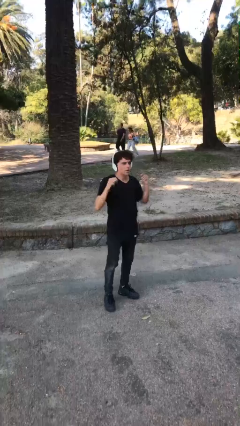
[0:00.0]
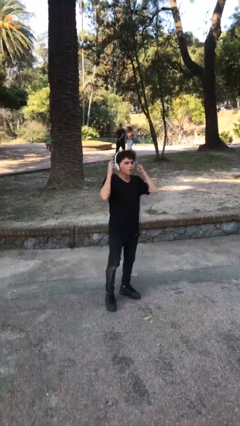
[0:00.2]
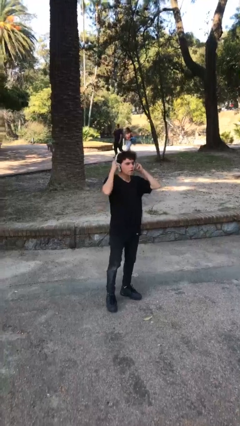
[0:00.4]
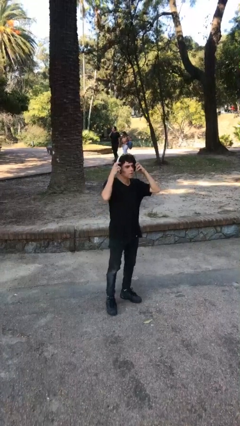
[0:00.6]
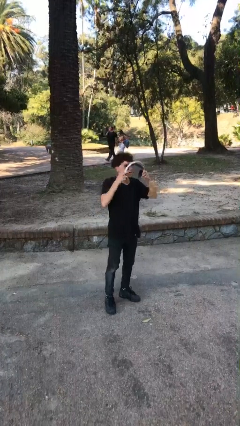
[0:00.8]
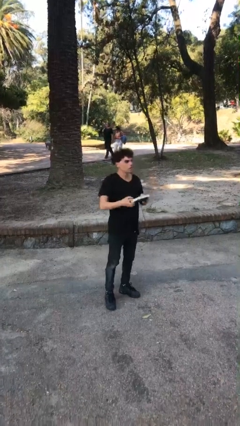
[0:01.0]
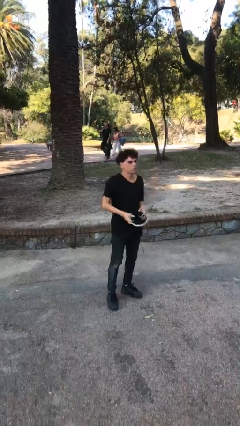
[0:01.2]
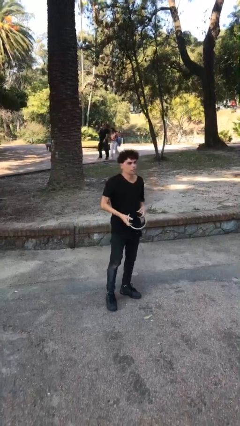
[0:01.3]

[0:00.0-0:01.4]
person takes off headphones

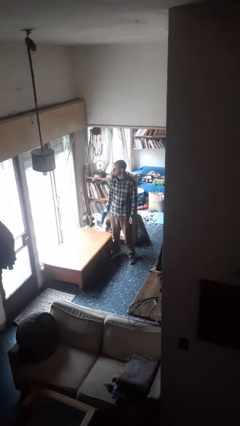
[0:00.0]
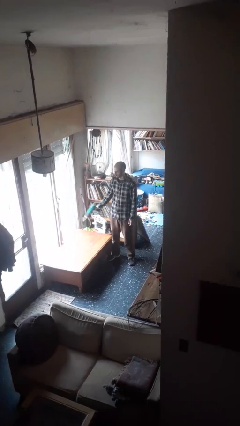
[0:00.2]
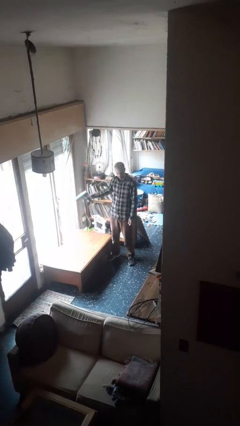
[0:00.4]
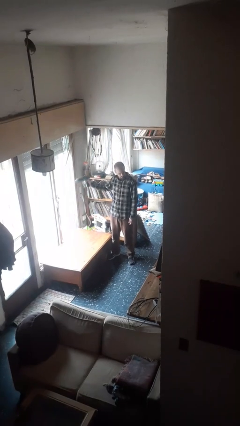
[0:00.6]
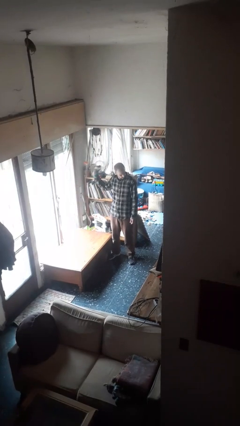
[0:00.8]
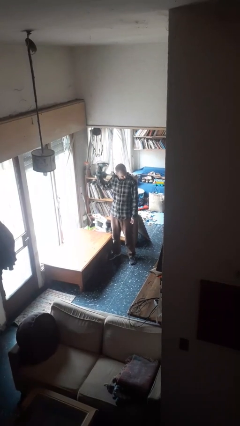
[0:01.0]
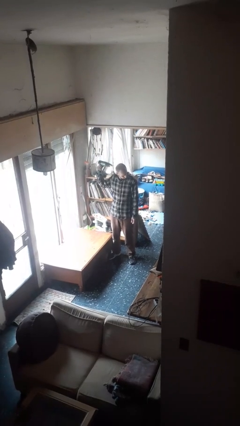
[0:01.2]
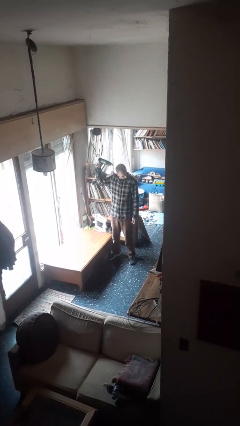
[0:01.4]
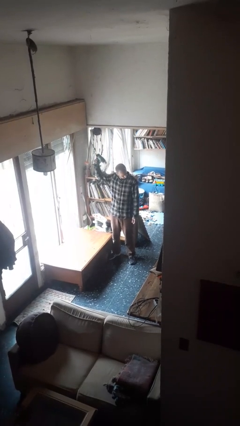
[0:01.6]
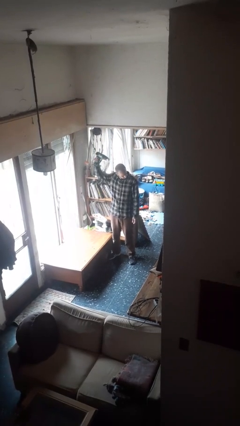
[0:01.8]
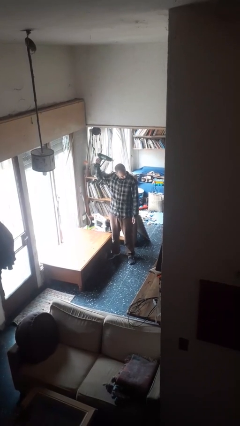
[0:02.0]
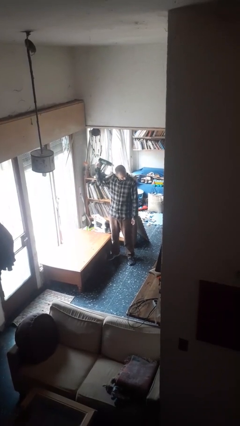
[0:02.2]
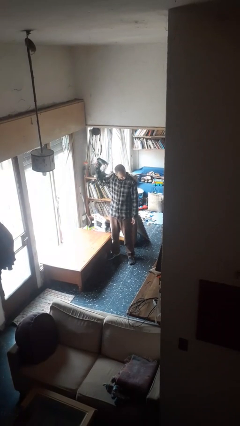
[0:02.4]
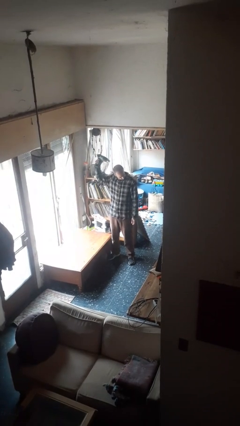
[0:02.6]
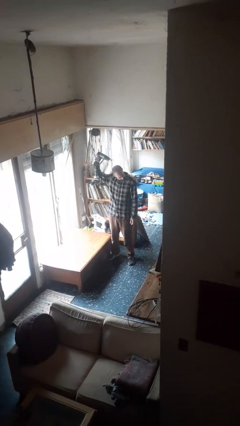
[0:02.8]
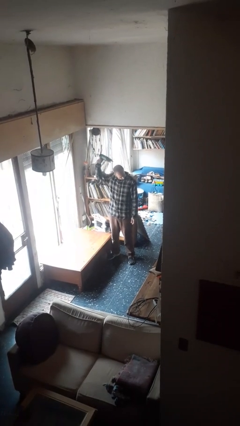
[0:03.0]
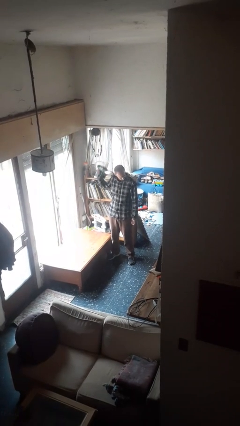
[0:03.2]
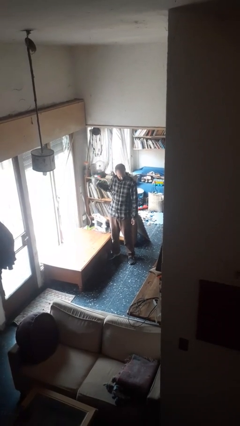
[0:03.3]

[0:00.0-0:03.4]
person dries hair with hairdryer

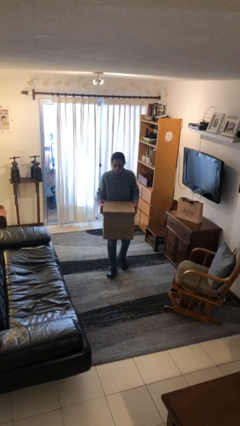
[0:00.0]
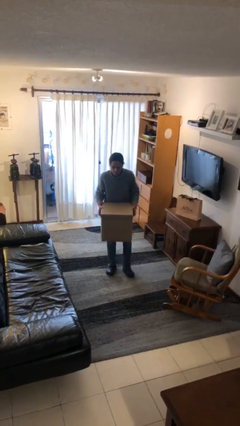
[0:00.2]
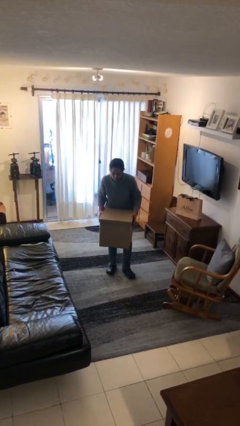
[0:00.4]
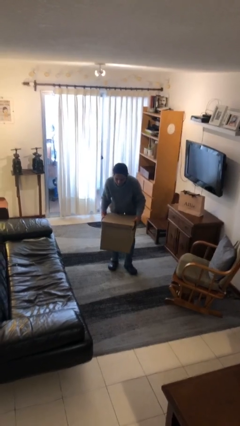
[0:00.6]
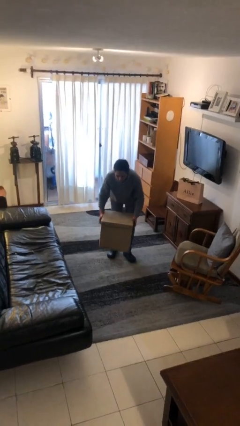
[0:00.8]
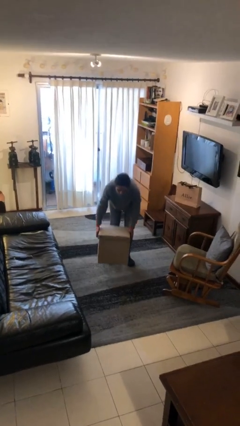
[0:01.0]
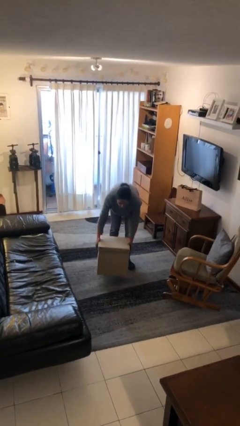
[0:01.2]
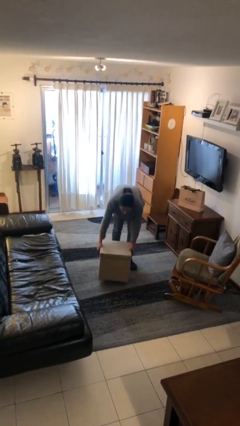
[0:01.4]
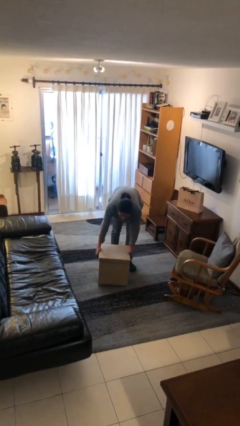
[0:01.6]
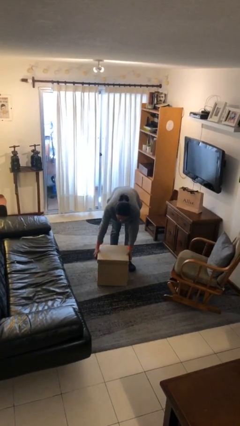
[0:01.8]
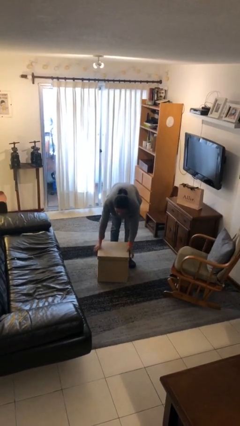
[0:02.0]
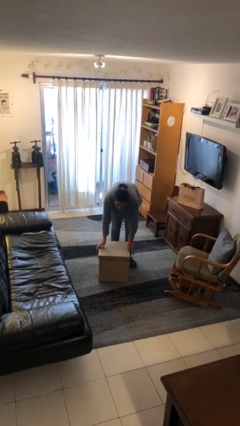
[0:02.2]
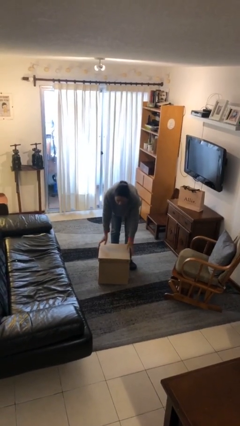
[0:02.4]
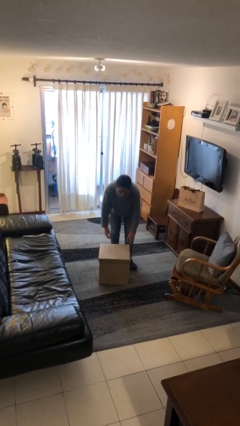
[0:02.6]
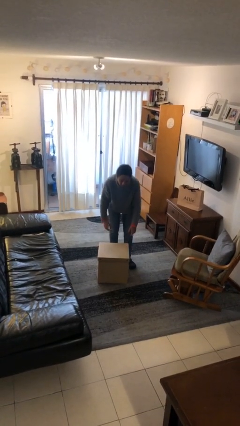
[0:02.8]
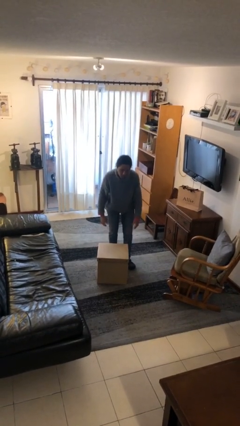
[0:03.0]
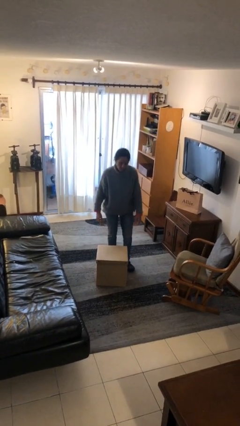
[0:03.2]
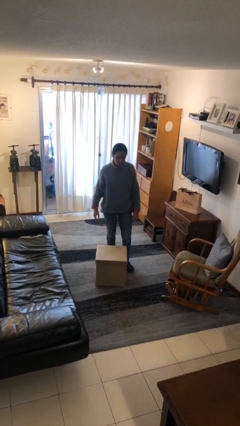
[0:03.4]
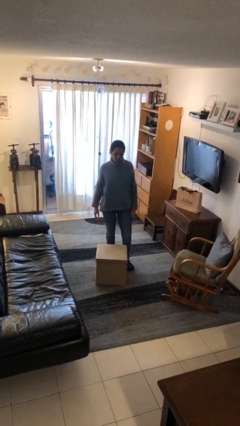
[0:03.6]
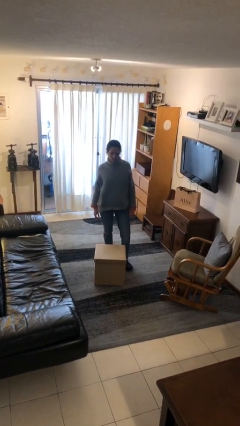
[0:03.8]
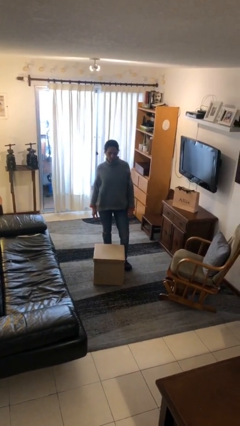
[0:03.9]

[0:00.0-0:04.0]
person puts down object on floor

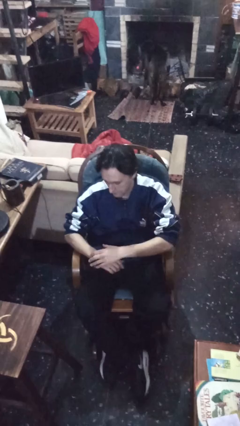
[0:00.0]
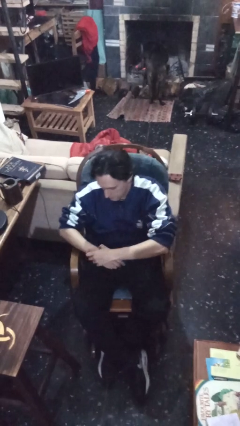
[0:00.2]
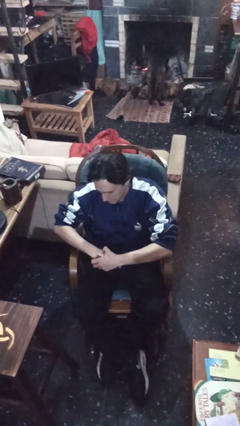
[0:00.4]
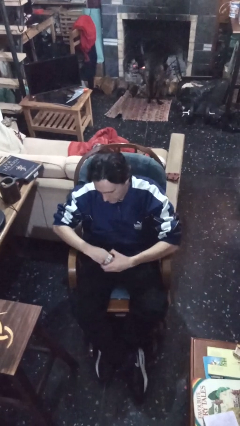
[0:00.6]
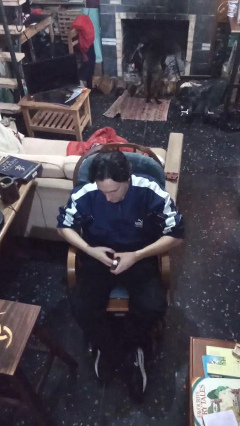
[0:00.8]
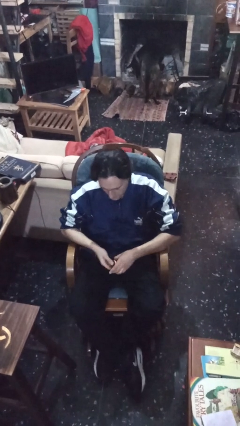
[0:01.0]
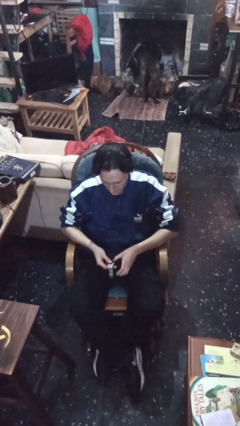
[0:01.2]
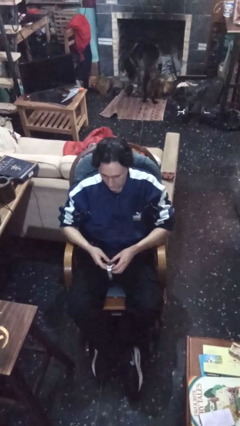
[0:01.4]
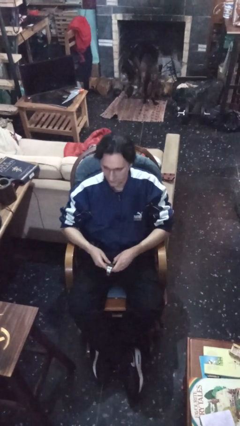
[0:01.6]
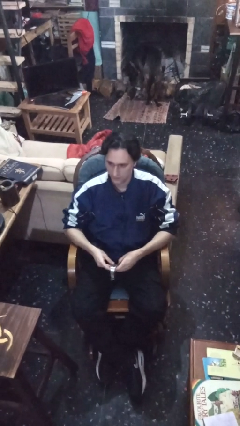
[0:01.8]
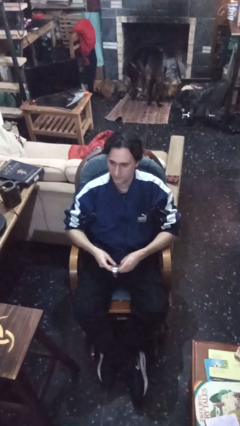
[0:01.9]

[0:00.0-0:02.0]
person takes off wristwatch

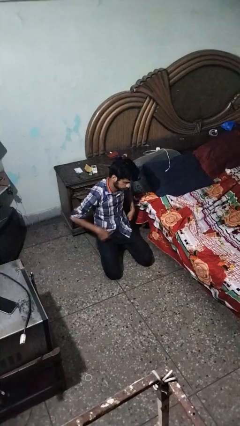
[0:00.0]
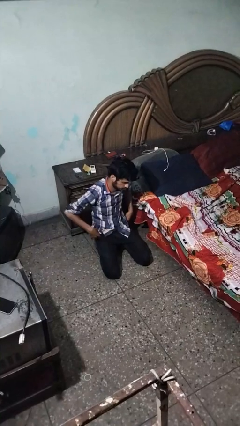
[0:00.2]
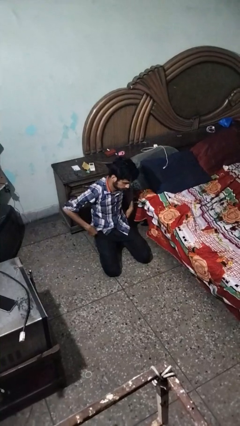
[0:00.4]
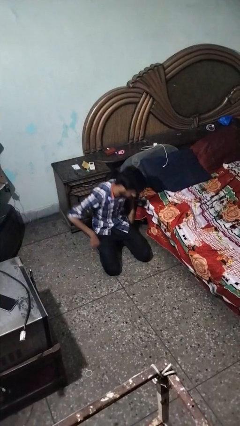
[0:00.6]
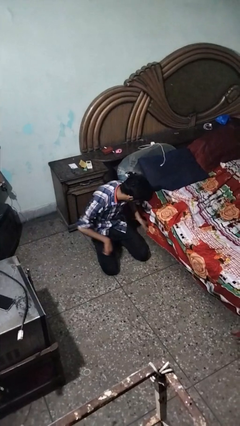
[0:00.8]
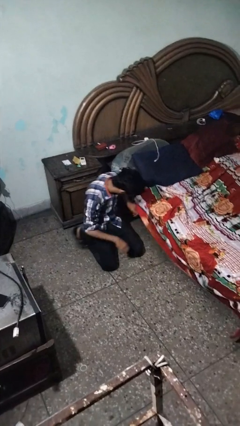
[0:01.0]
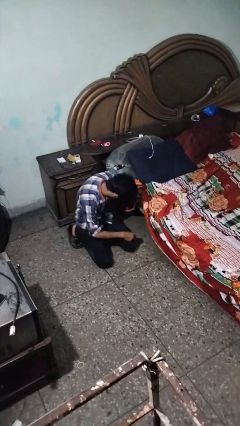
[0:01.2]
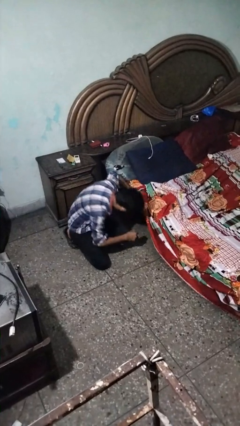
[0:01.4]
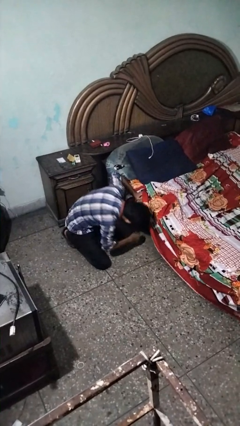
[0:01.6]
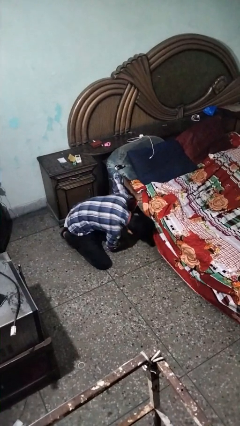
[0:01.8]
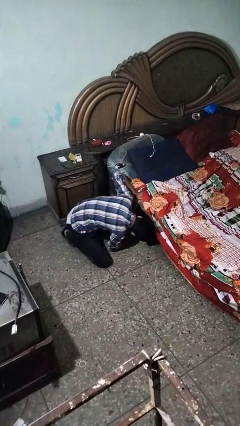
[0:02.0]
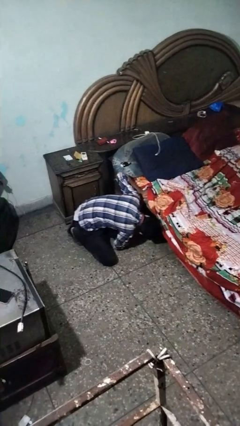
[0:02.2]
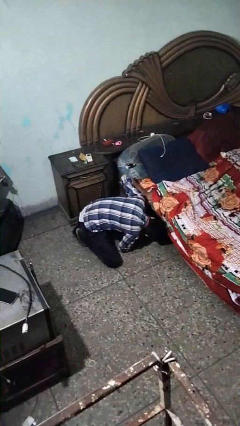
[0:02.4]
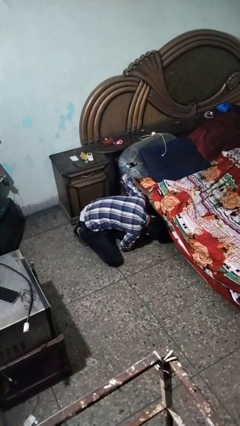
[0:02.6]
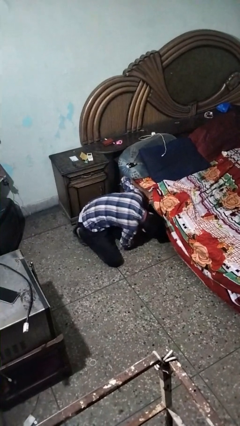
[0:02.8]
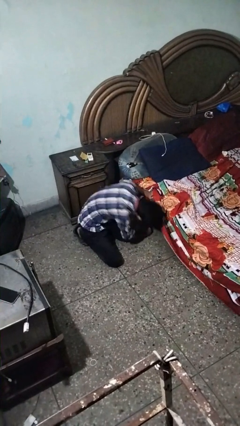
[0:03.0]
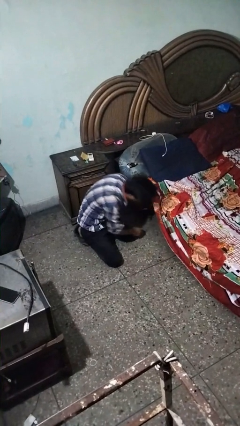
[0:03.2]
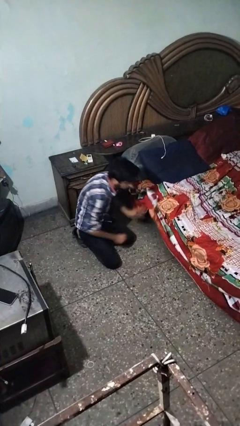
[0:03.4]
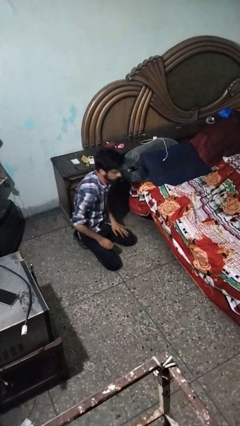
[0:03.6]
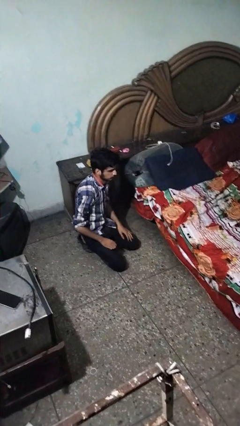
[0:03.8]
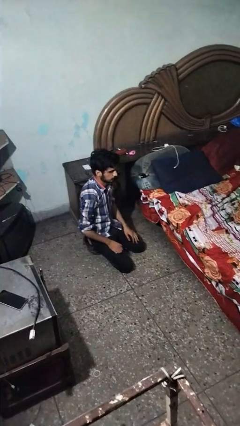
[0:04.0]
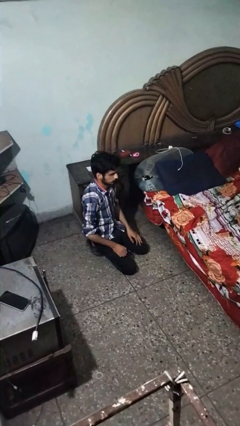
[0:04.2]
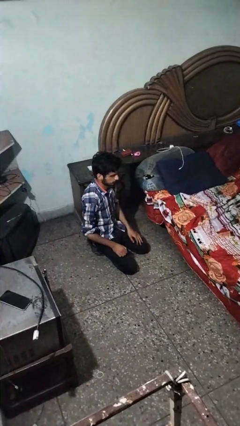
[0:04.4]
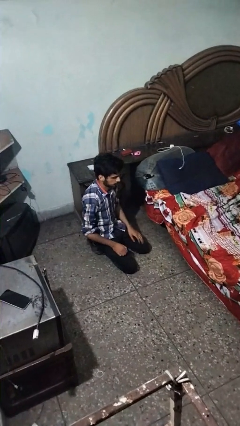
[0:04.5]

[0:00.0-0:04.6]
person searches under bed

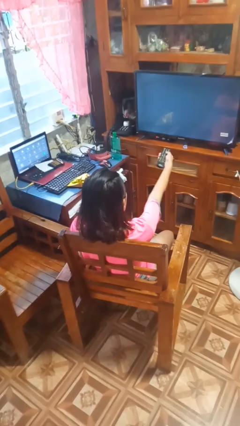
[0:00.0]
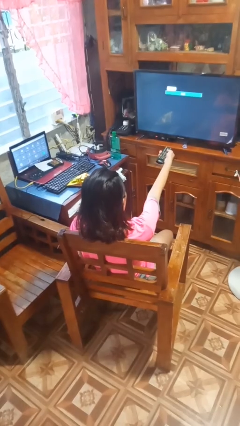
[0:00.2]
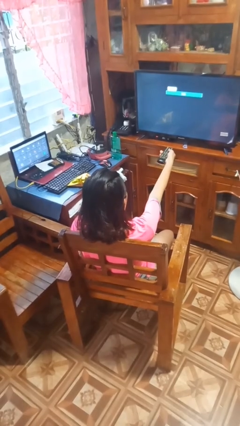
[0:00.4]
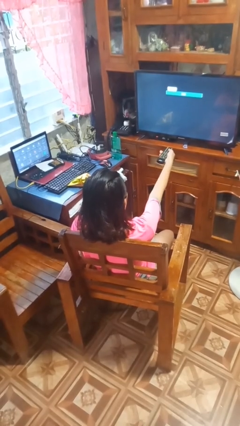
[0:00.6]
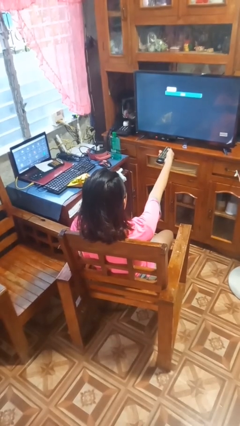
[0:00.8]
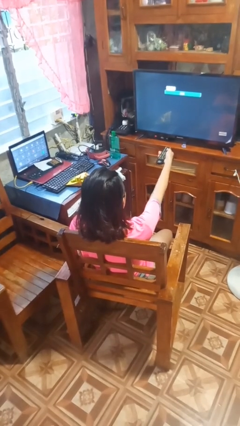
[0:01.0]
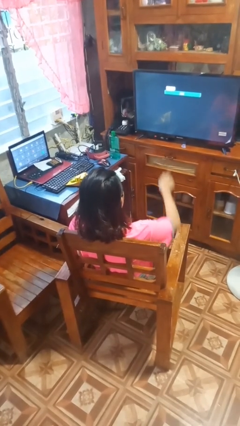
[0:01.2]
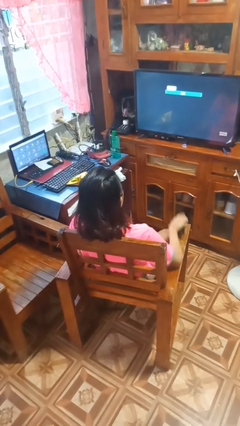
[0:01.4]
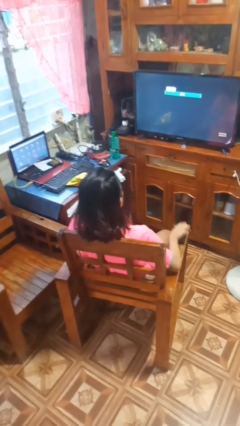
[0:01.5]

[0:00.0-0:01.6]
person uses television remote

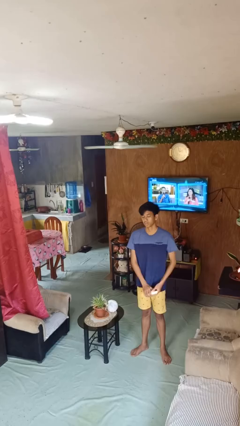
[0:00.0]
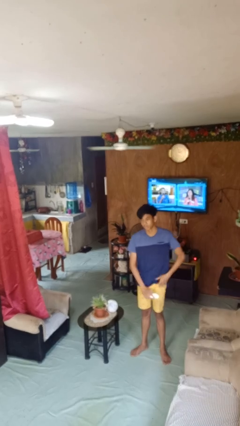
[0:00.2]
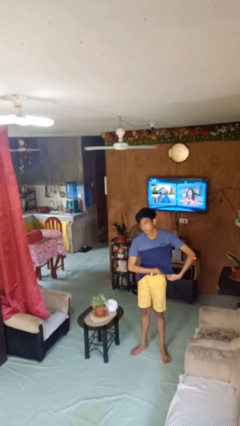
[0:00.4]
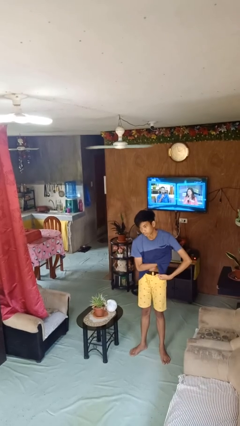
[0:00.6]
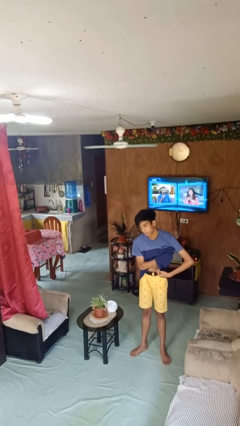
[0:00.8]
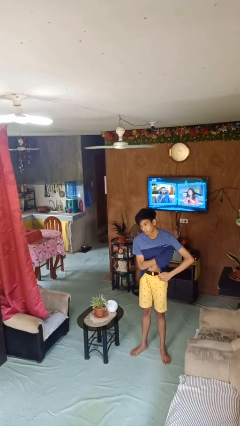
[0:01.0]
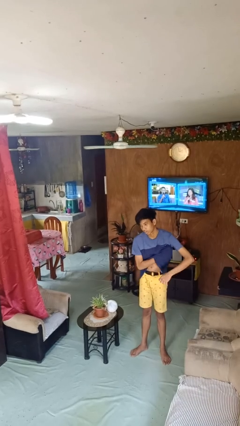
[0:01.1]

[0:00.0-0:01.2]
person applies deodorant
